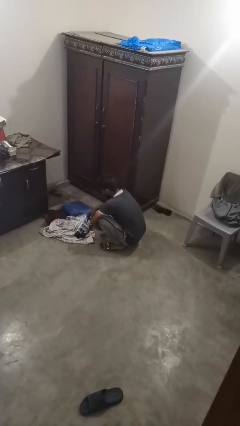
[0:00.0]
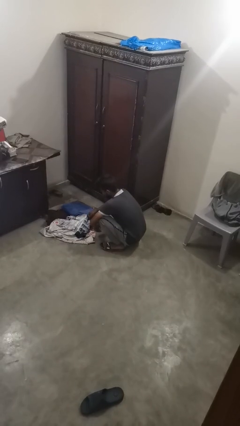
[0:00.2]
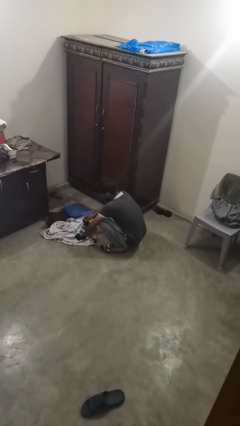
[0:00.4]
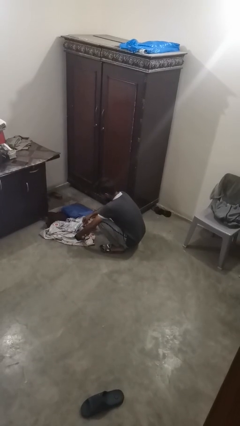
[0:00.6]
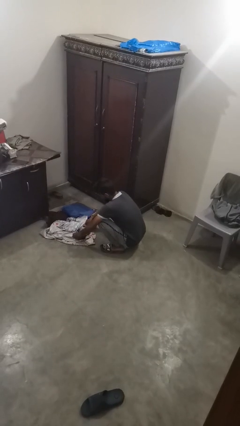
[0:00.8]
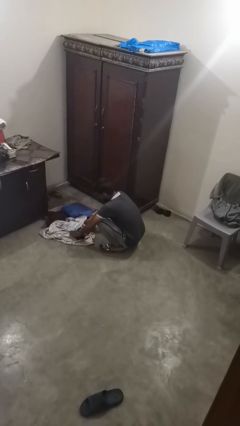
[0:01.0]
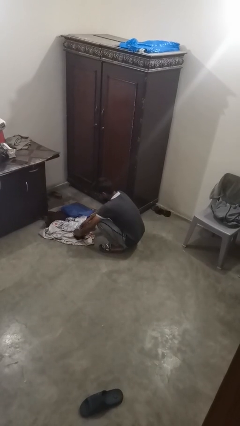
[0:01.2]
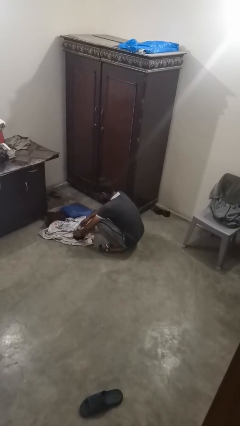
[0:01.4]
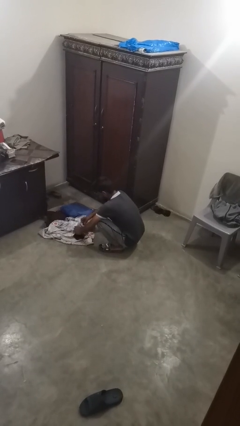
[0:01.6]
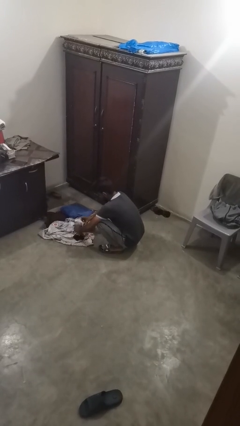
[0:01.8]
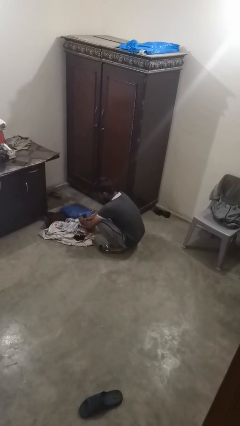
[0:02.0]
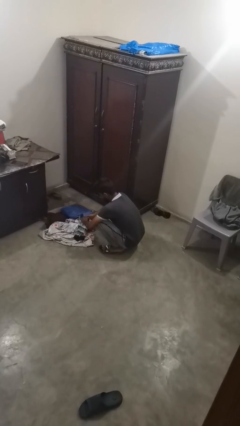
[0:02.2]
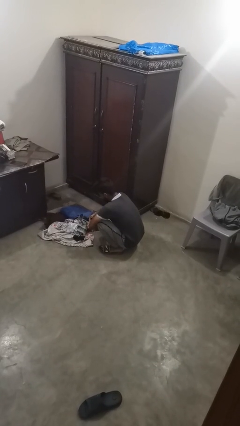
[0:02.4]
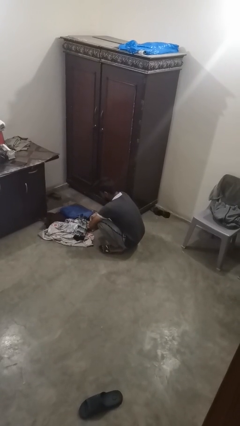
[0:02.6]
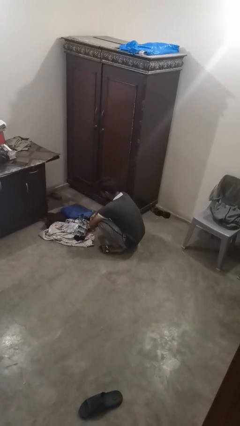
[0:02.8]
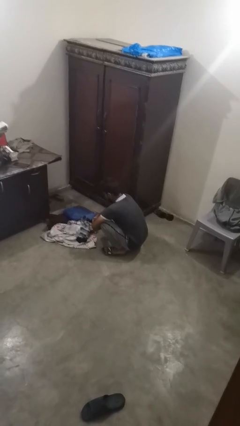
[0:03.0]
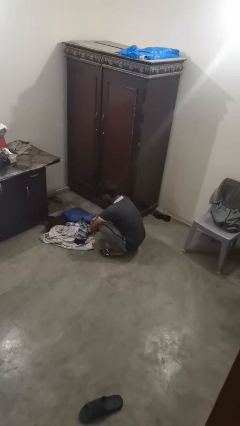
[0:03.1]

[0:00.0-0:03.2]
person folds socks

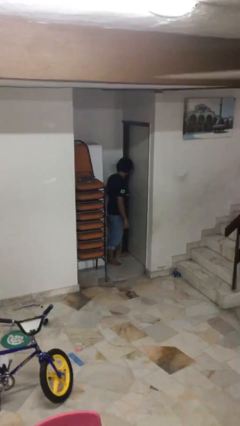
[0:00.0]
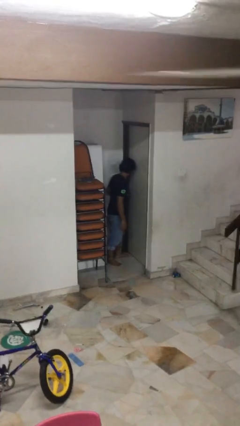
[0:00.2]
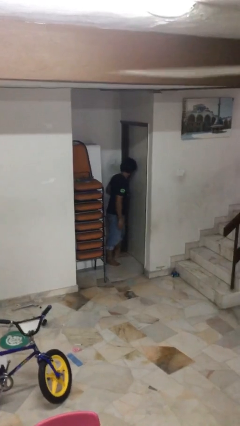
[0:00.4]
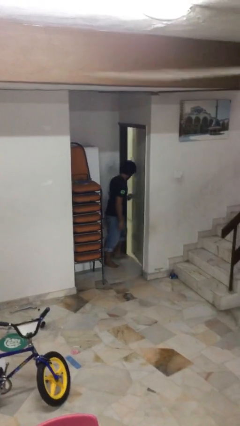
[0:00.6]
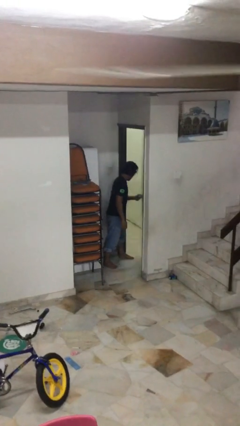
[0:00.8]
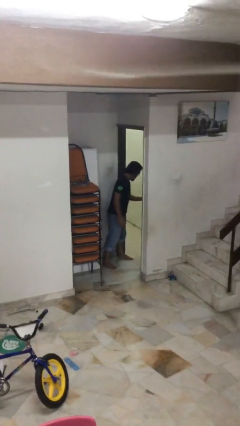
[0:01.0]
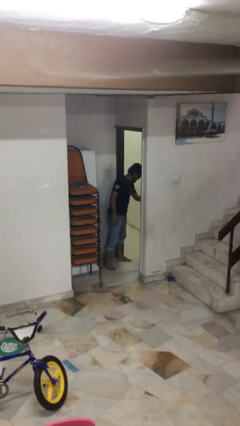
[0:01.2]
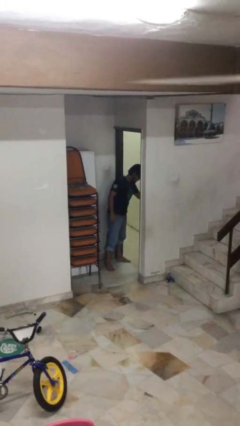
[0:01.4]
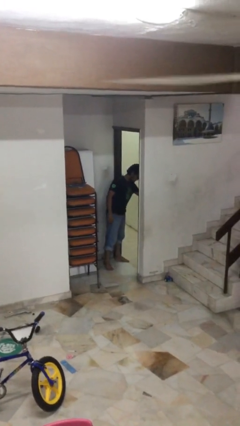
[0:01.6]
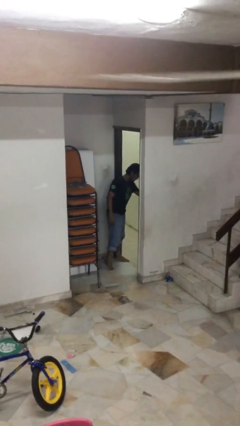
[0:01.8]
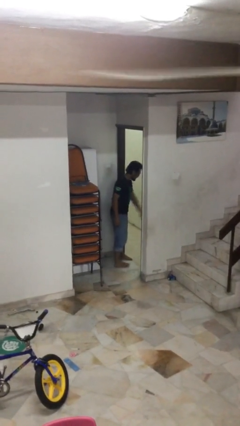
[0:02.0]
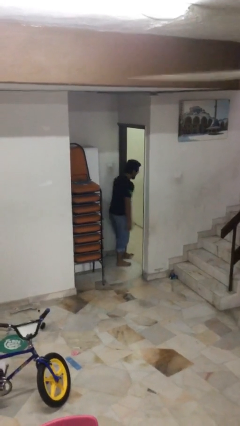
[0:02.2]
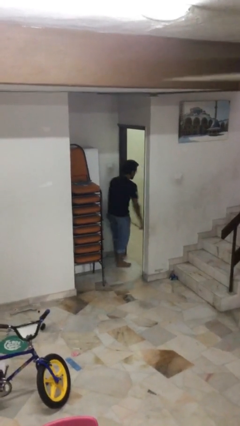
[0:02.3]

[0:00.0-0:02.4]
person opens facility door

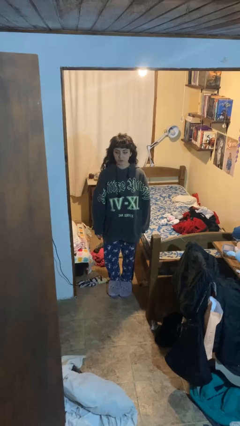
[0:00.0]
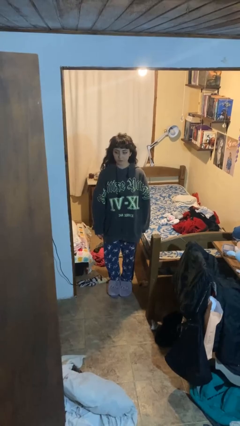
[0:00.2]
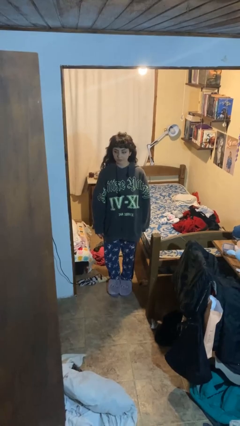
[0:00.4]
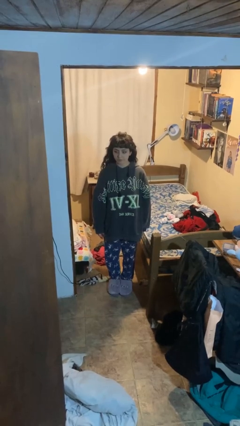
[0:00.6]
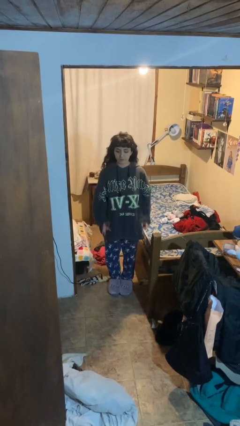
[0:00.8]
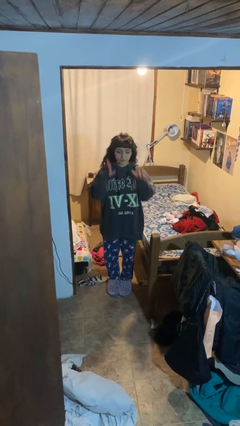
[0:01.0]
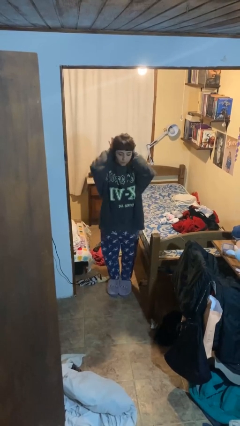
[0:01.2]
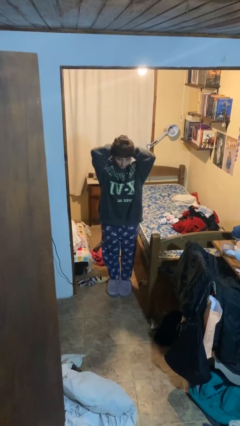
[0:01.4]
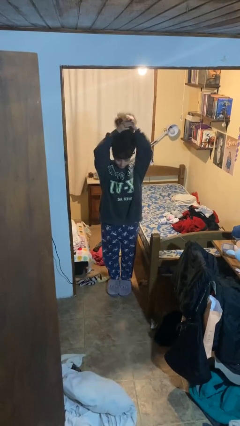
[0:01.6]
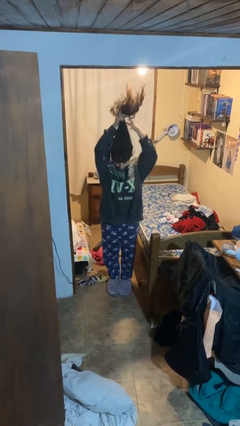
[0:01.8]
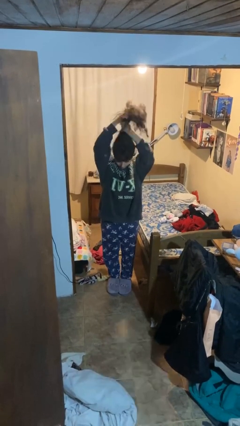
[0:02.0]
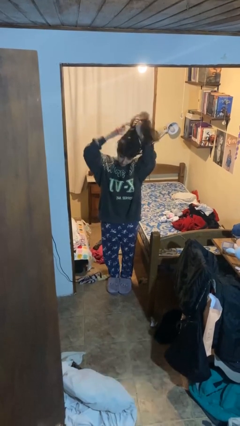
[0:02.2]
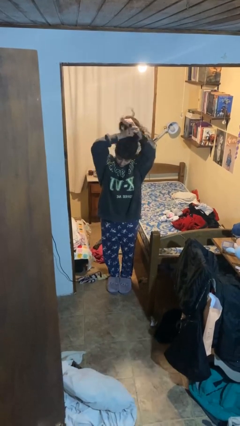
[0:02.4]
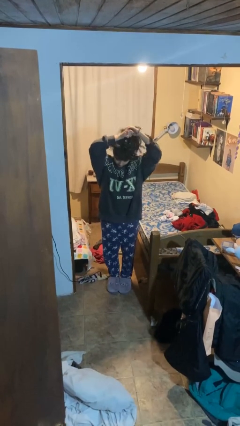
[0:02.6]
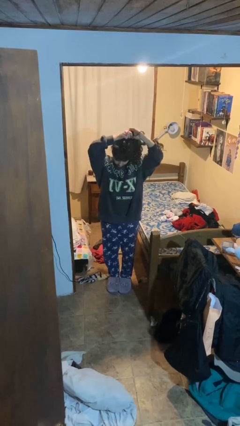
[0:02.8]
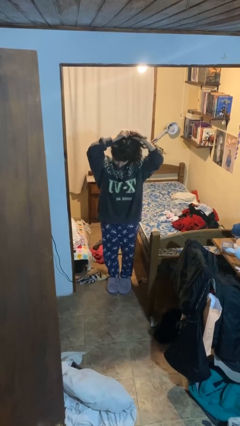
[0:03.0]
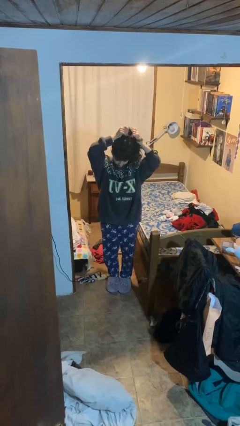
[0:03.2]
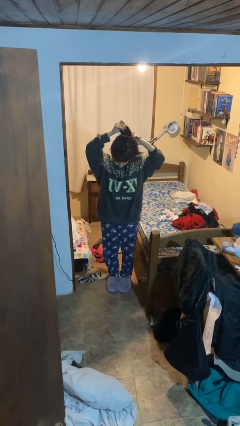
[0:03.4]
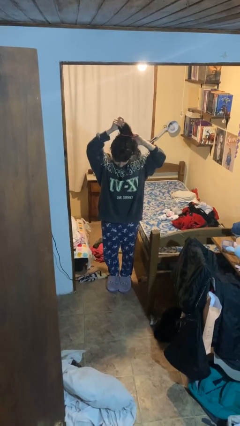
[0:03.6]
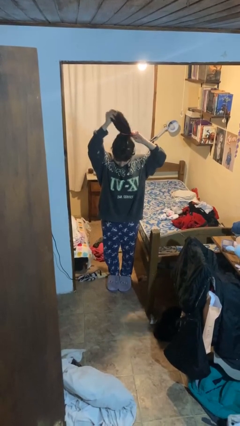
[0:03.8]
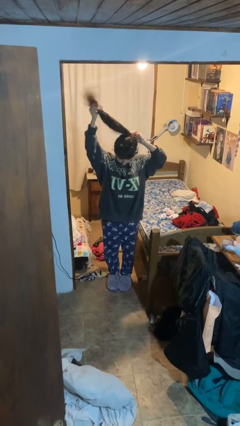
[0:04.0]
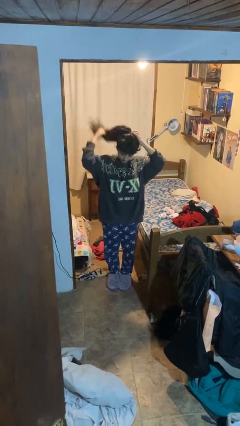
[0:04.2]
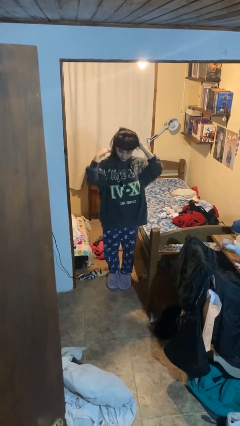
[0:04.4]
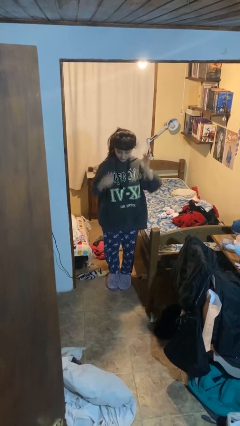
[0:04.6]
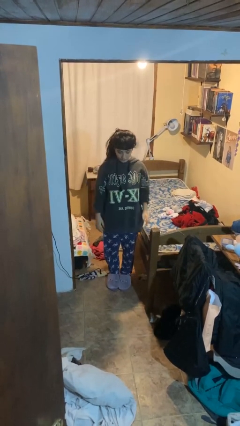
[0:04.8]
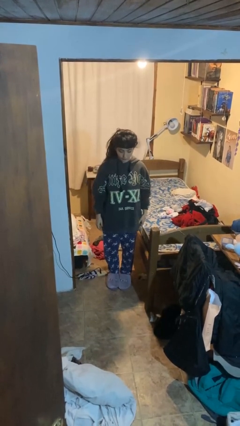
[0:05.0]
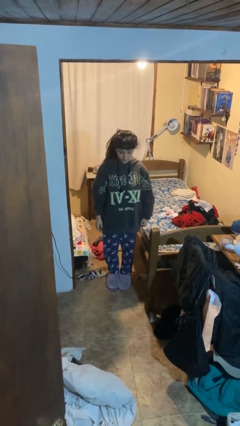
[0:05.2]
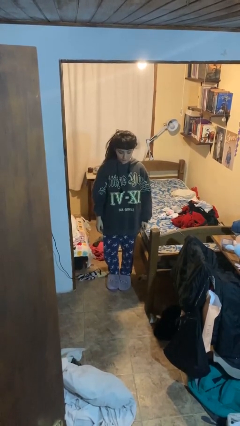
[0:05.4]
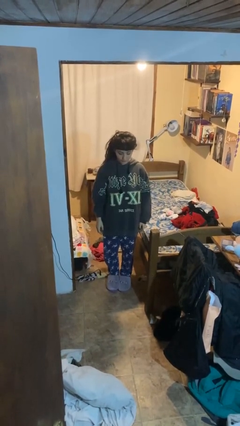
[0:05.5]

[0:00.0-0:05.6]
person puts hair in ponytail

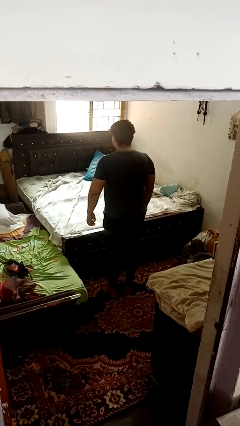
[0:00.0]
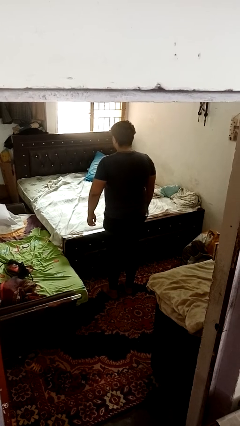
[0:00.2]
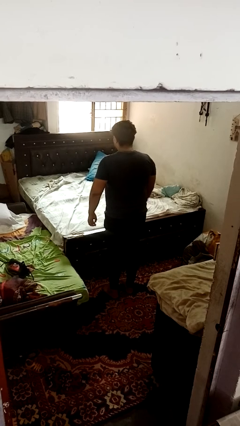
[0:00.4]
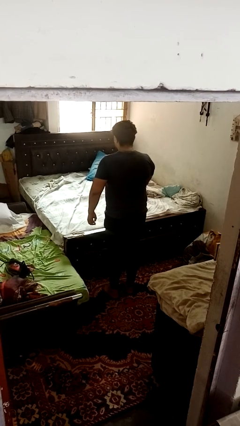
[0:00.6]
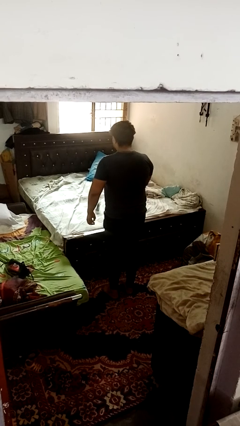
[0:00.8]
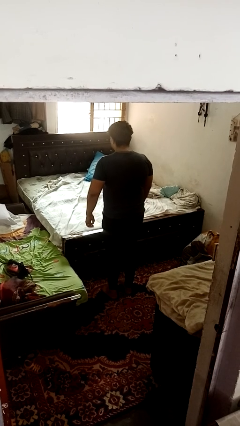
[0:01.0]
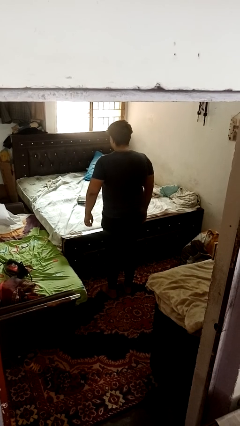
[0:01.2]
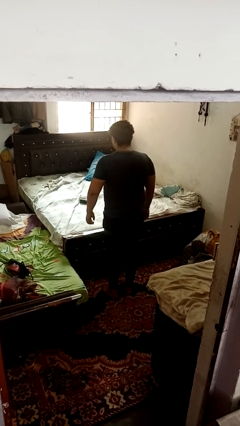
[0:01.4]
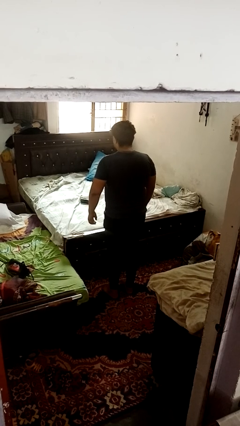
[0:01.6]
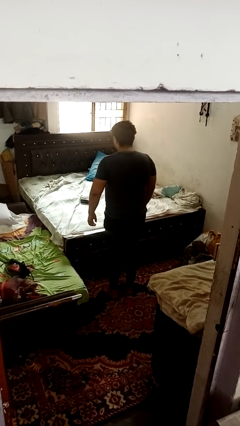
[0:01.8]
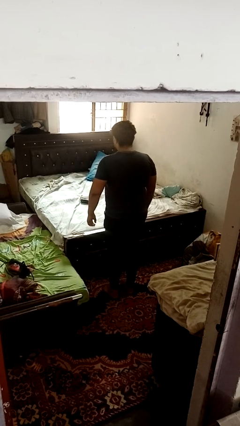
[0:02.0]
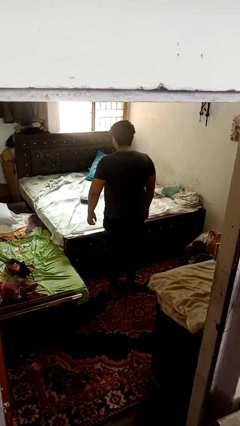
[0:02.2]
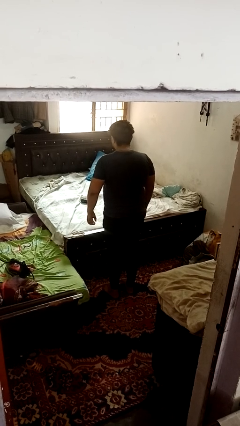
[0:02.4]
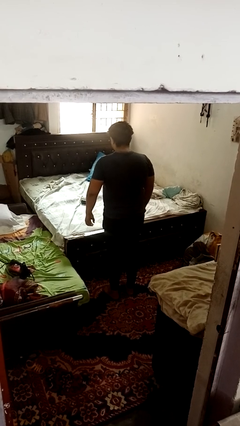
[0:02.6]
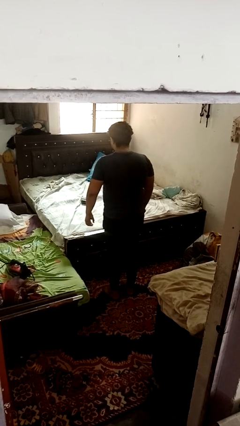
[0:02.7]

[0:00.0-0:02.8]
person throws object on bed

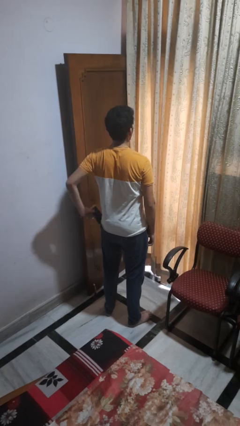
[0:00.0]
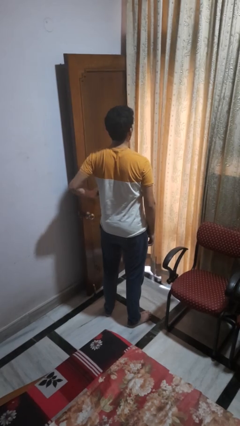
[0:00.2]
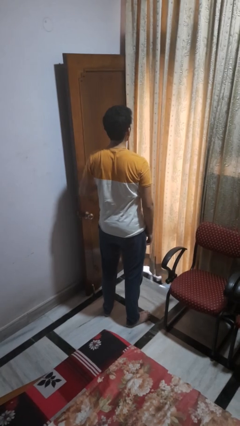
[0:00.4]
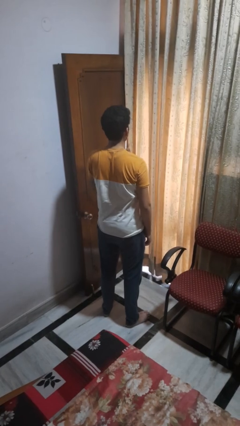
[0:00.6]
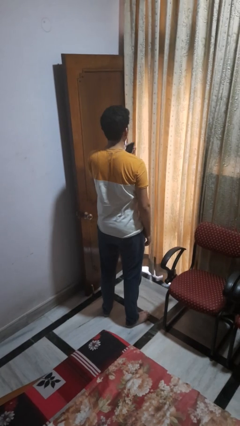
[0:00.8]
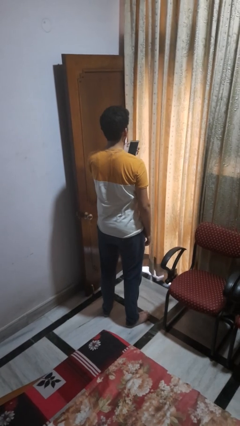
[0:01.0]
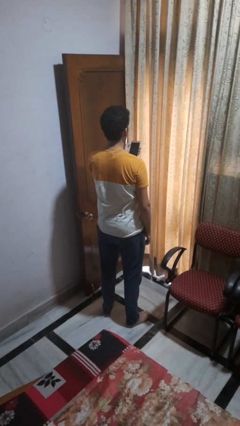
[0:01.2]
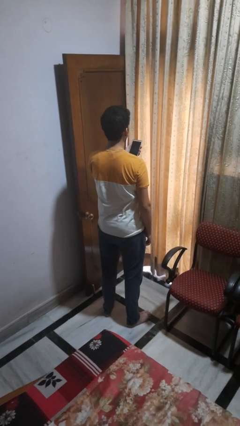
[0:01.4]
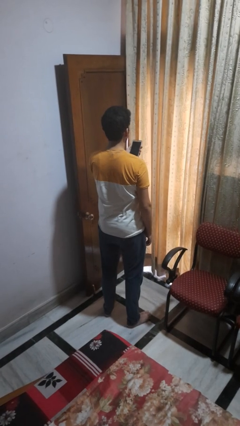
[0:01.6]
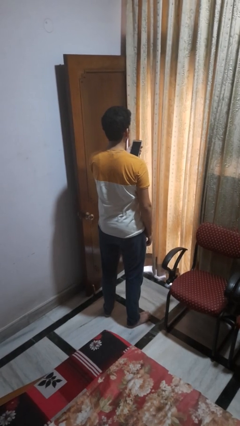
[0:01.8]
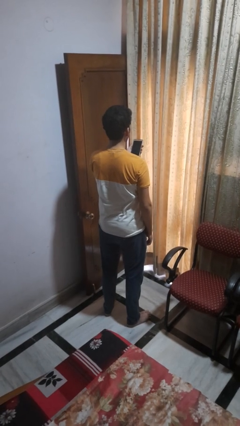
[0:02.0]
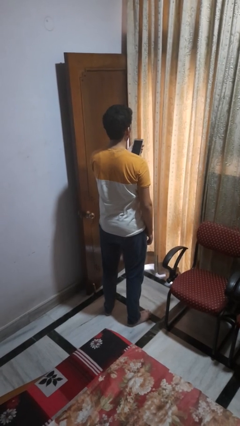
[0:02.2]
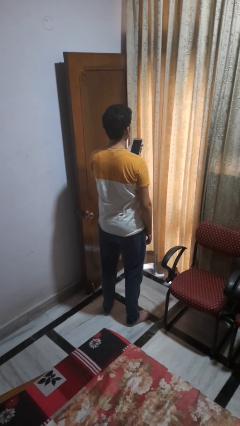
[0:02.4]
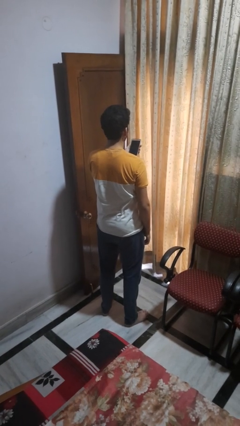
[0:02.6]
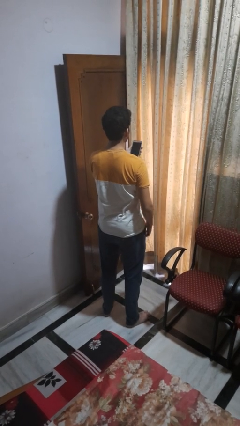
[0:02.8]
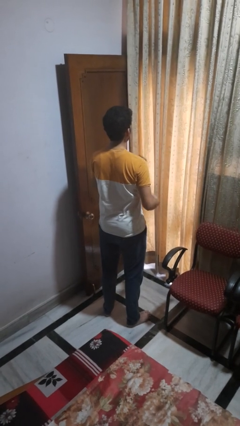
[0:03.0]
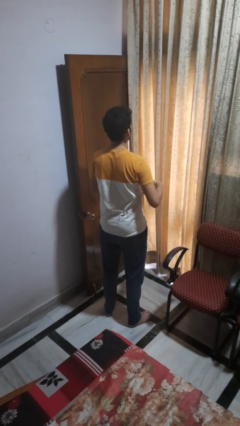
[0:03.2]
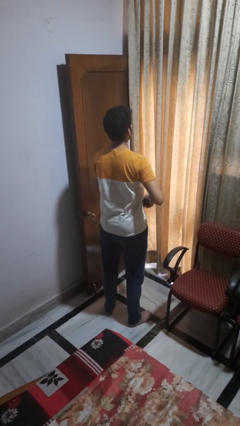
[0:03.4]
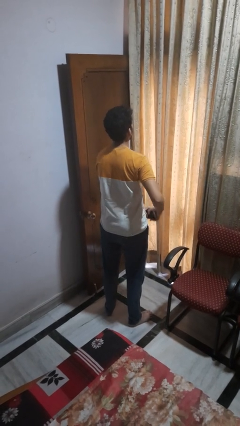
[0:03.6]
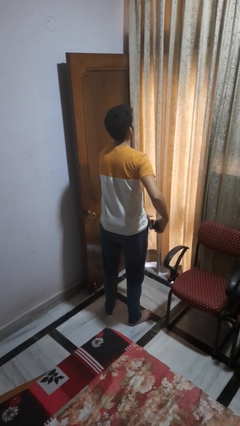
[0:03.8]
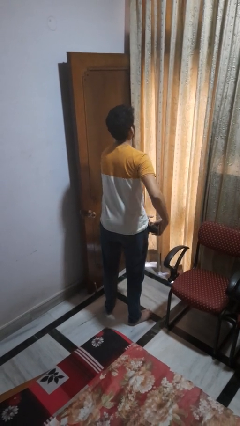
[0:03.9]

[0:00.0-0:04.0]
person takes phone from pocket
